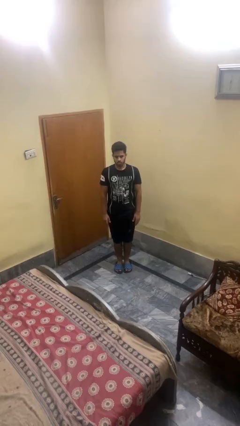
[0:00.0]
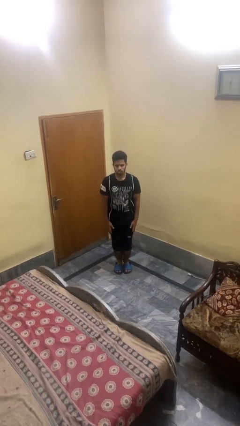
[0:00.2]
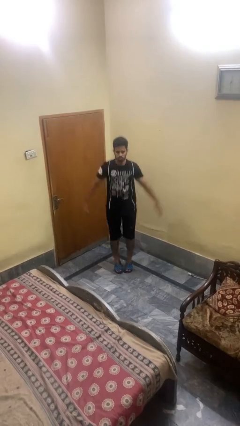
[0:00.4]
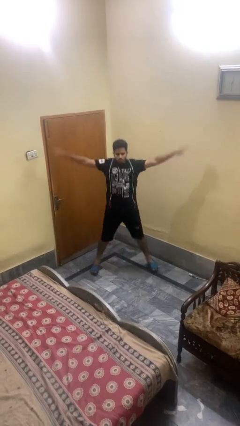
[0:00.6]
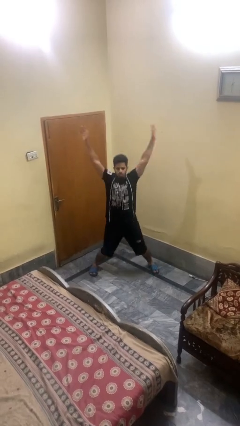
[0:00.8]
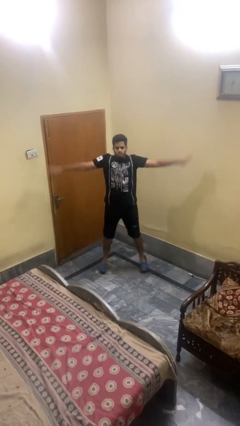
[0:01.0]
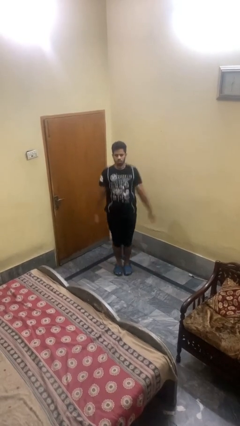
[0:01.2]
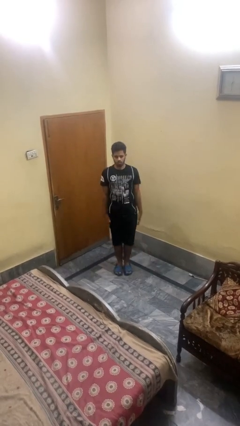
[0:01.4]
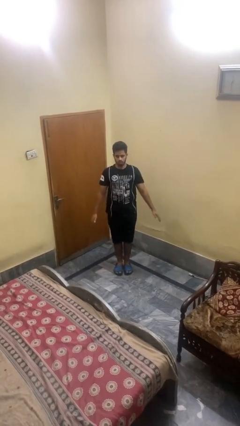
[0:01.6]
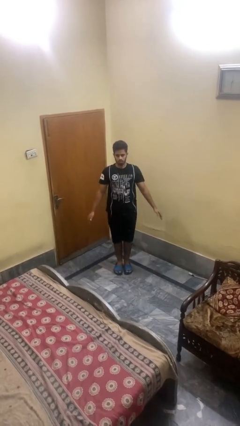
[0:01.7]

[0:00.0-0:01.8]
person exercises with jumping jacks

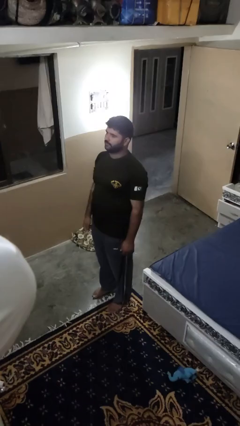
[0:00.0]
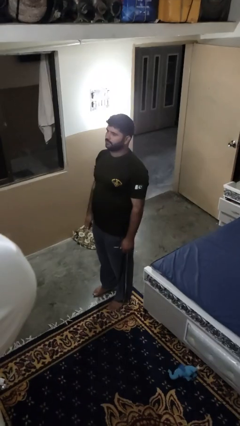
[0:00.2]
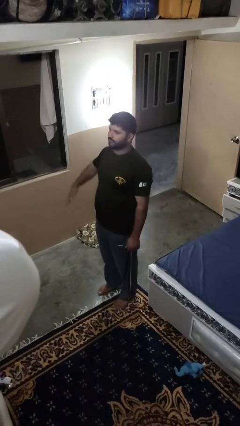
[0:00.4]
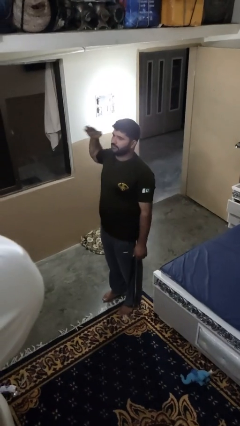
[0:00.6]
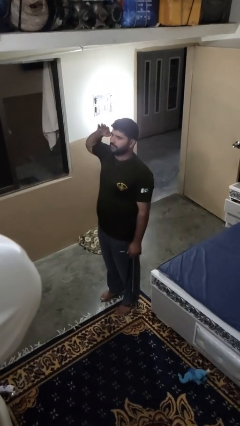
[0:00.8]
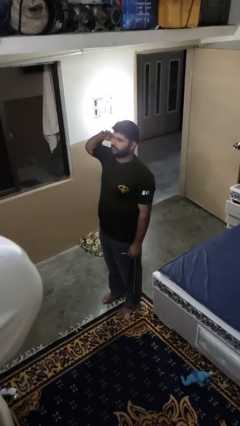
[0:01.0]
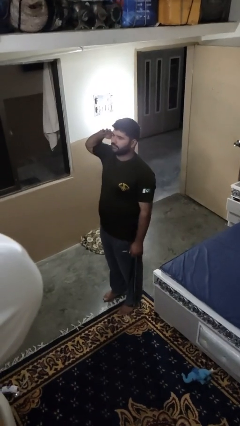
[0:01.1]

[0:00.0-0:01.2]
person salutes

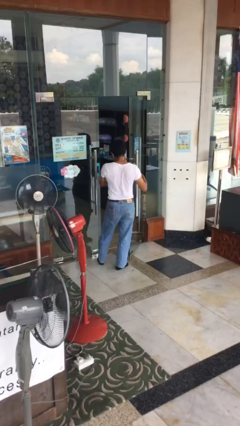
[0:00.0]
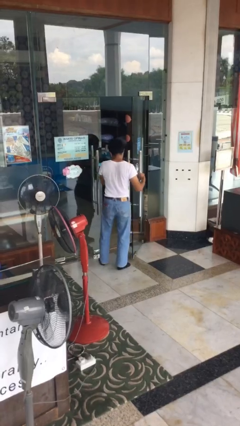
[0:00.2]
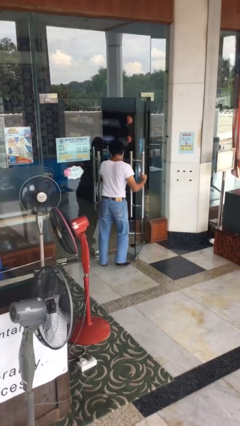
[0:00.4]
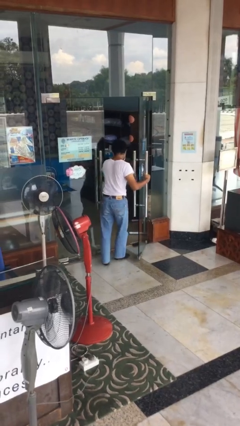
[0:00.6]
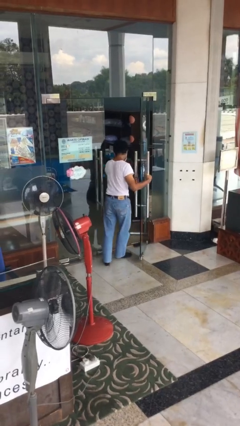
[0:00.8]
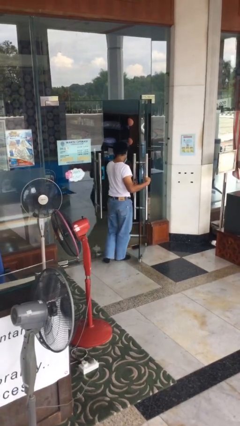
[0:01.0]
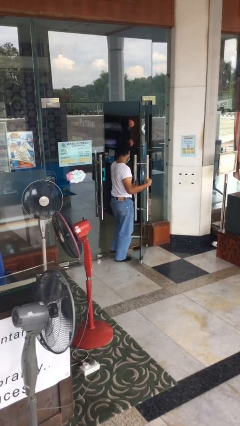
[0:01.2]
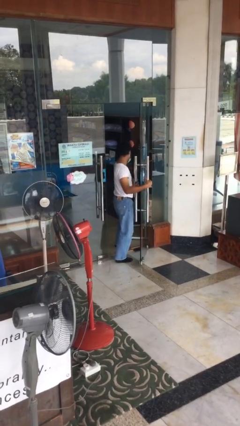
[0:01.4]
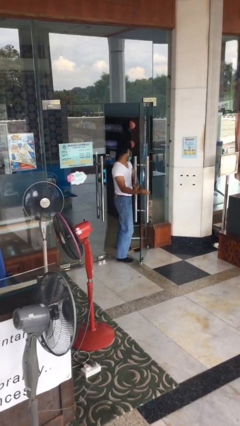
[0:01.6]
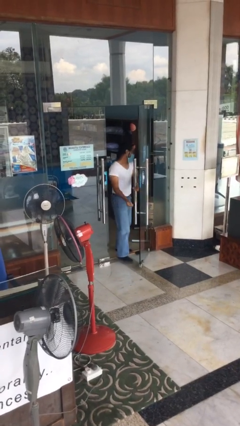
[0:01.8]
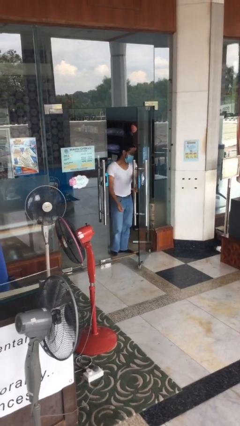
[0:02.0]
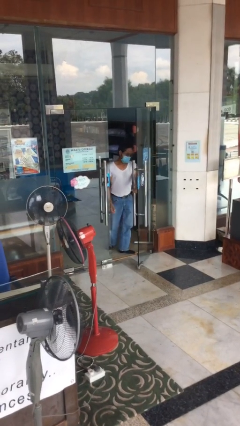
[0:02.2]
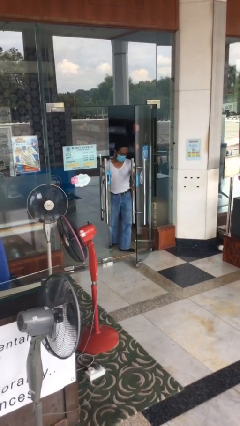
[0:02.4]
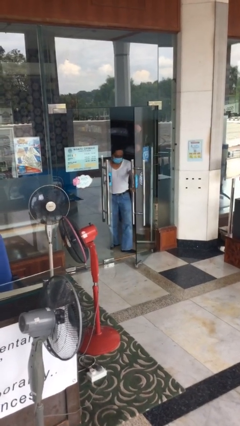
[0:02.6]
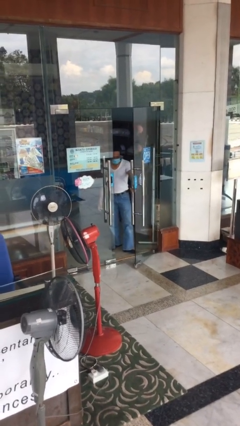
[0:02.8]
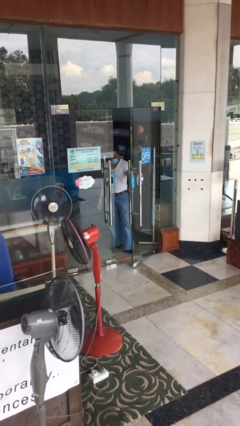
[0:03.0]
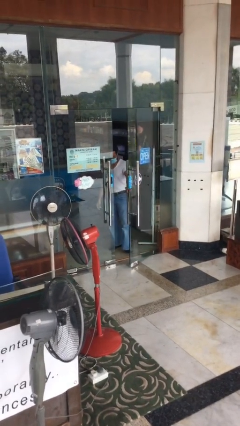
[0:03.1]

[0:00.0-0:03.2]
person exits scene through structure

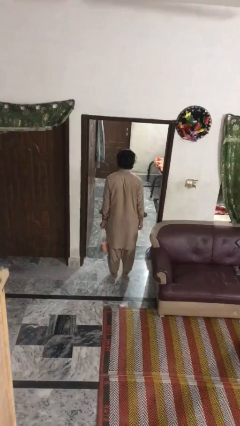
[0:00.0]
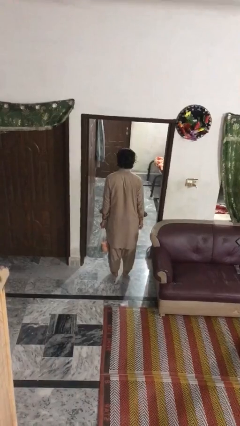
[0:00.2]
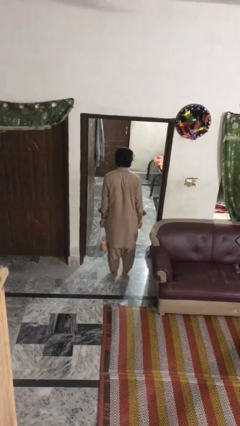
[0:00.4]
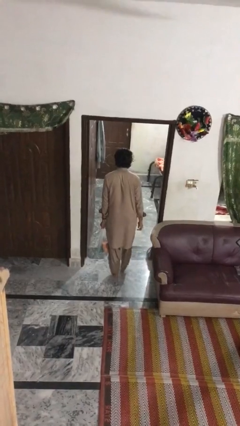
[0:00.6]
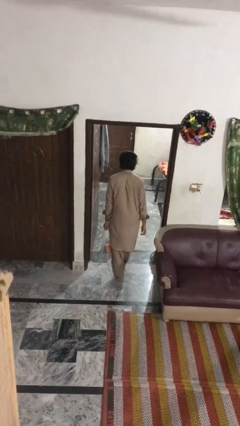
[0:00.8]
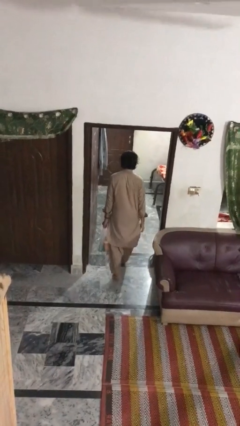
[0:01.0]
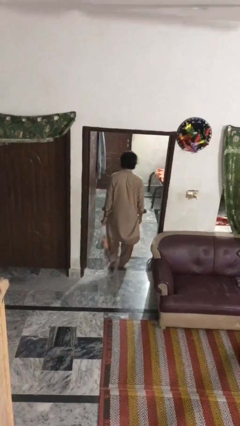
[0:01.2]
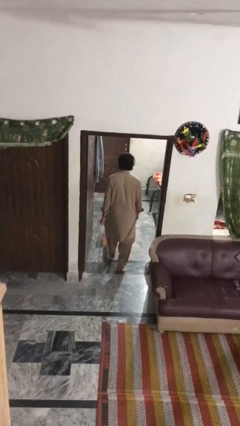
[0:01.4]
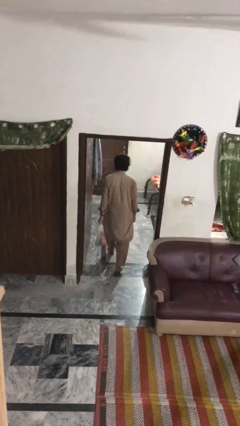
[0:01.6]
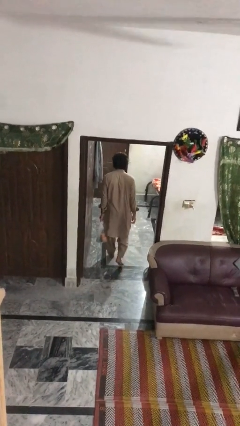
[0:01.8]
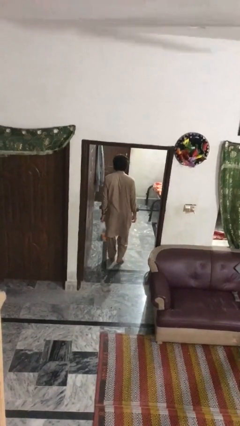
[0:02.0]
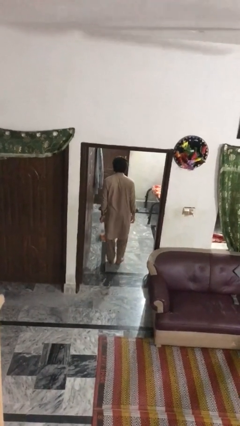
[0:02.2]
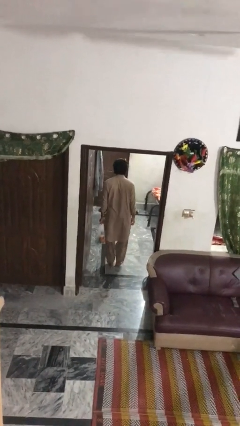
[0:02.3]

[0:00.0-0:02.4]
person carries groceries

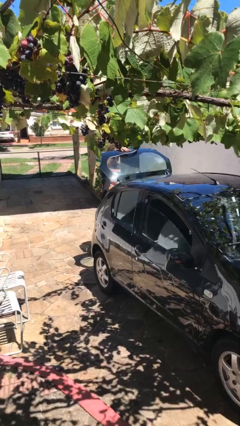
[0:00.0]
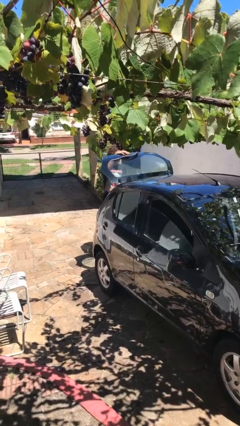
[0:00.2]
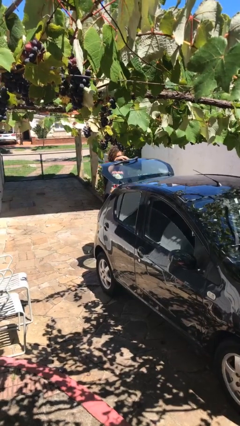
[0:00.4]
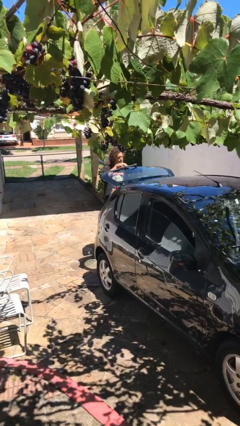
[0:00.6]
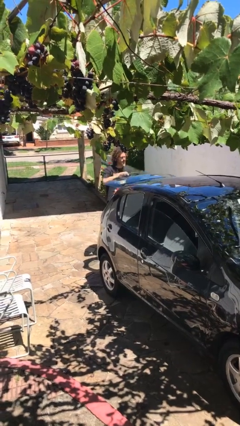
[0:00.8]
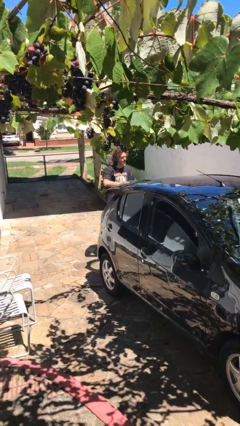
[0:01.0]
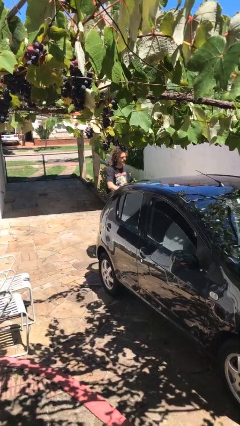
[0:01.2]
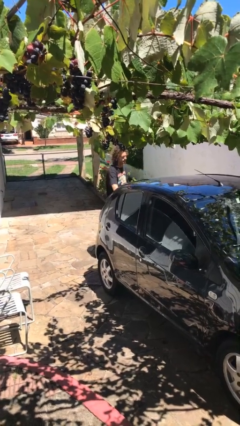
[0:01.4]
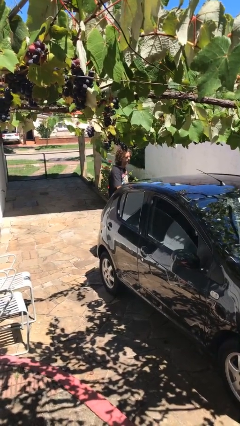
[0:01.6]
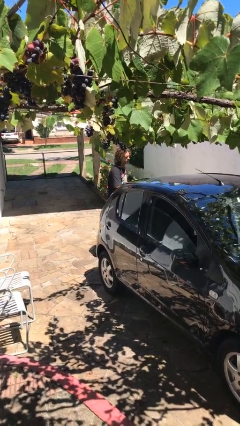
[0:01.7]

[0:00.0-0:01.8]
person closes car trunk

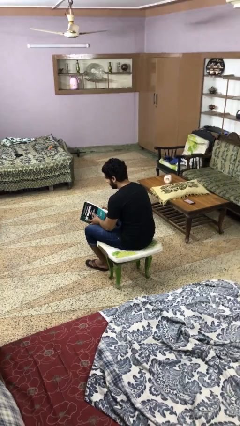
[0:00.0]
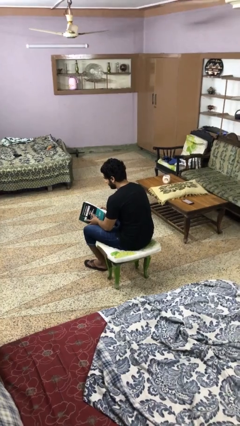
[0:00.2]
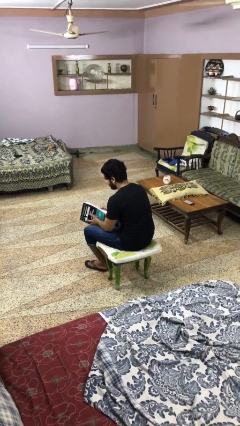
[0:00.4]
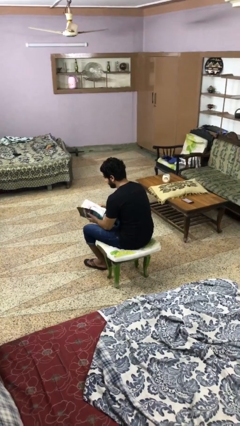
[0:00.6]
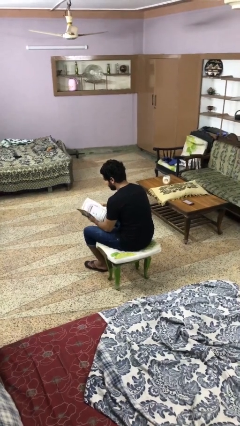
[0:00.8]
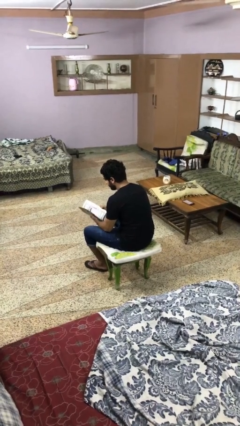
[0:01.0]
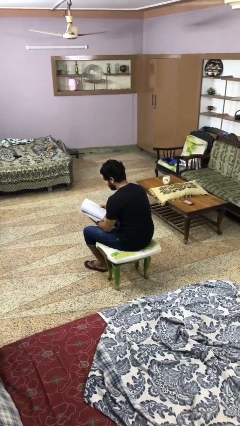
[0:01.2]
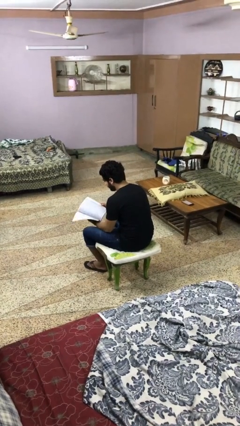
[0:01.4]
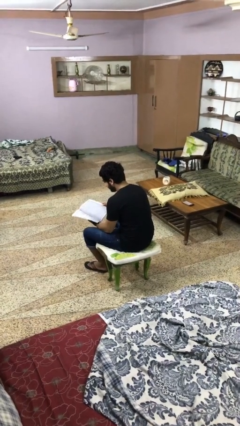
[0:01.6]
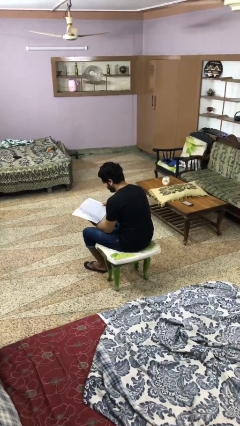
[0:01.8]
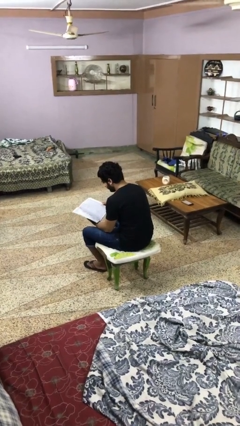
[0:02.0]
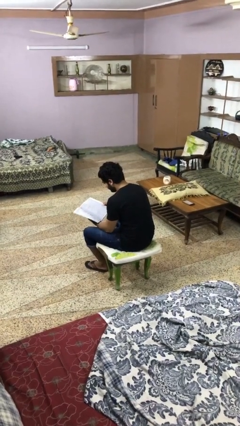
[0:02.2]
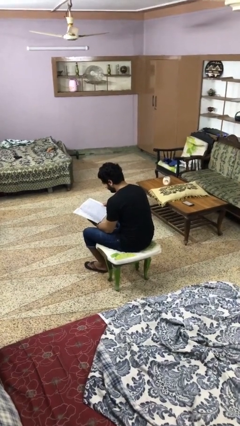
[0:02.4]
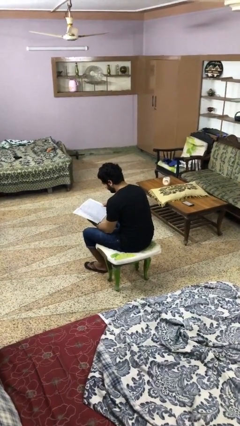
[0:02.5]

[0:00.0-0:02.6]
person reads book

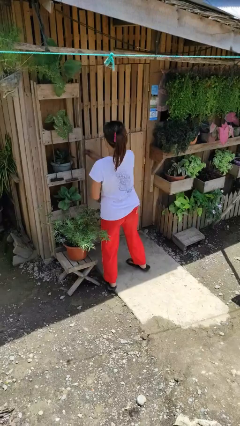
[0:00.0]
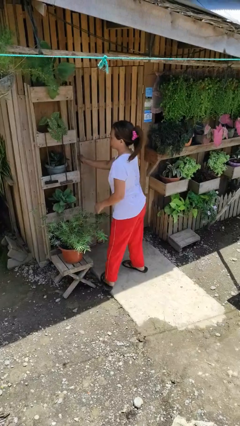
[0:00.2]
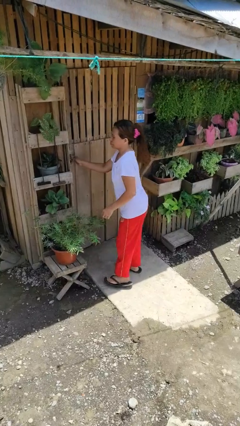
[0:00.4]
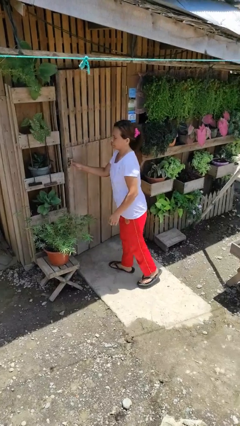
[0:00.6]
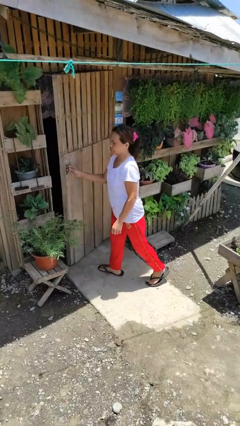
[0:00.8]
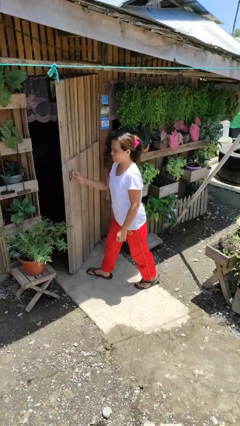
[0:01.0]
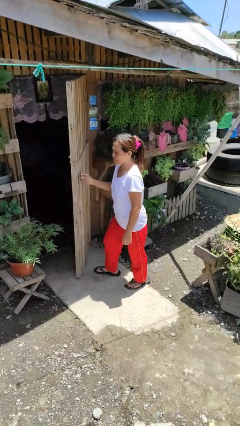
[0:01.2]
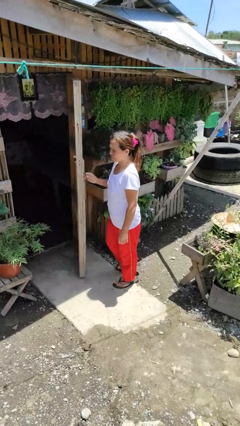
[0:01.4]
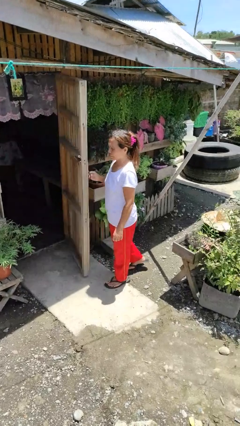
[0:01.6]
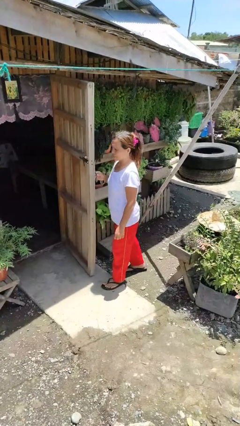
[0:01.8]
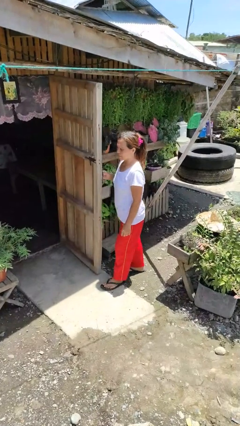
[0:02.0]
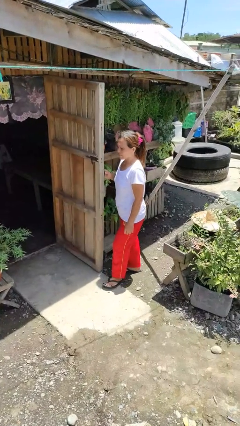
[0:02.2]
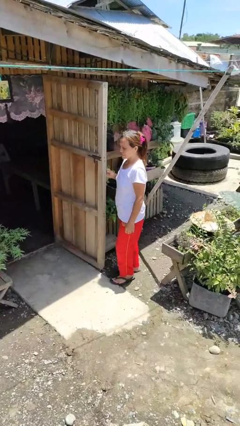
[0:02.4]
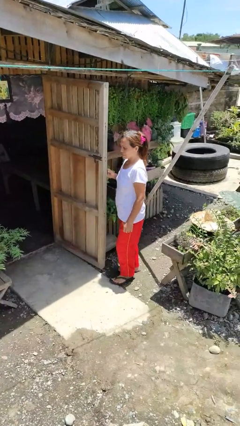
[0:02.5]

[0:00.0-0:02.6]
person opens facility door

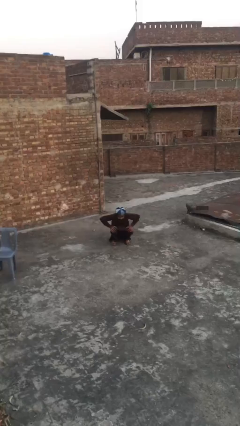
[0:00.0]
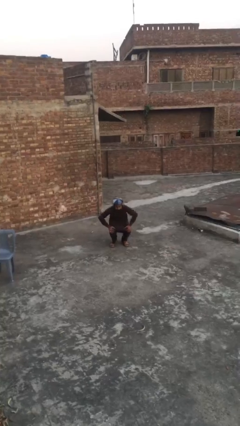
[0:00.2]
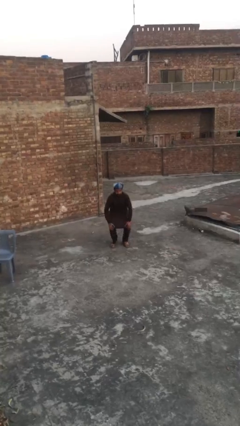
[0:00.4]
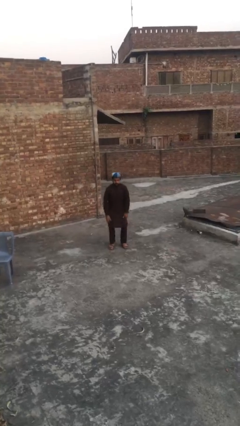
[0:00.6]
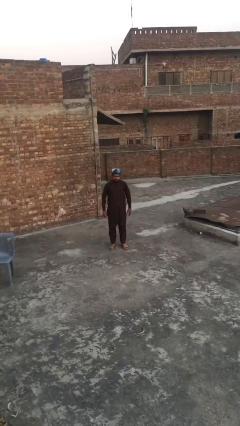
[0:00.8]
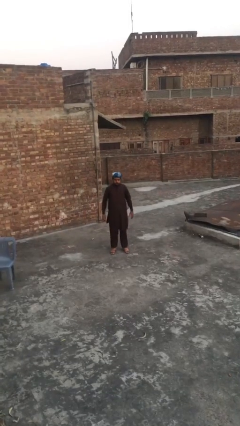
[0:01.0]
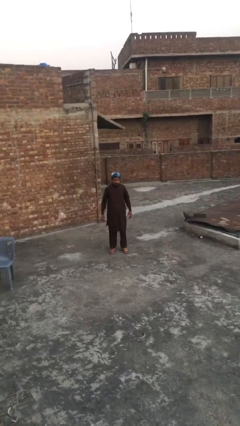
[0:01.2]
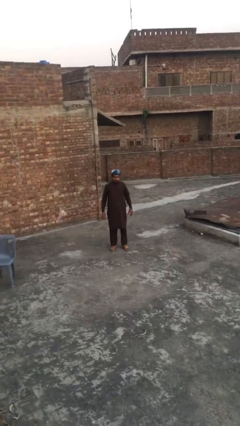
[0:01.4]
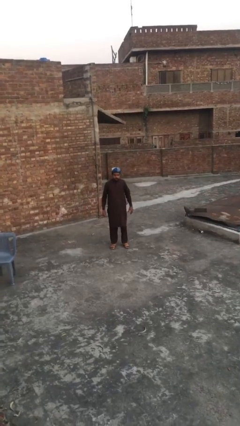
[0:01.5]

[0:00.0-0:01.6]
person stands up
